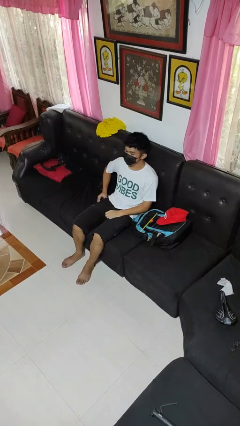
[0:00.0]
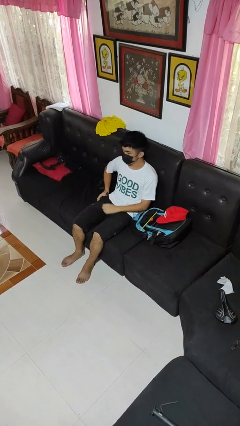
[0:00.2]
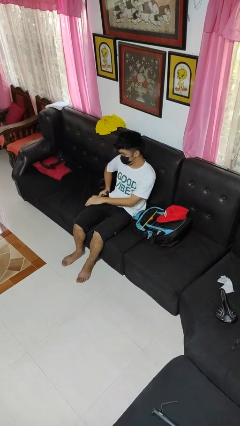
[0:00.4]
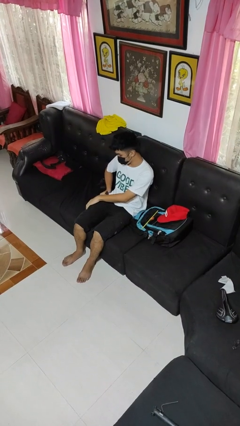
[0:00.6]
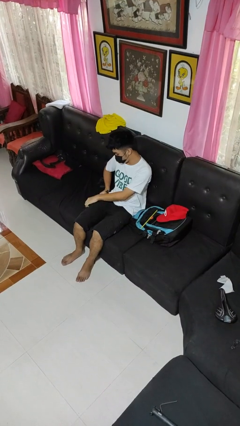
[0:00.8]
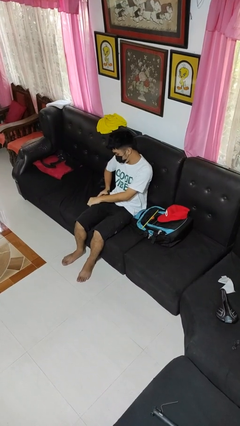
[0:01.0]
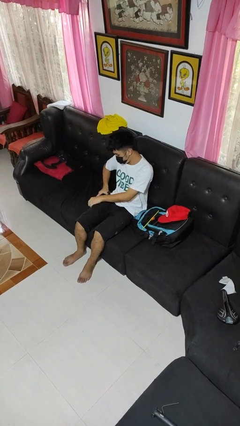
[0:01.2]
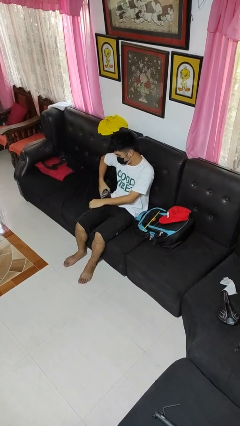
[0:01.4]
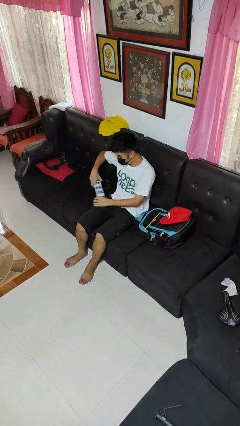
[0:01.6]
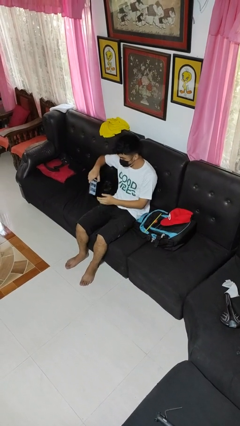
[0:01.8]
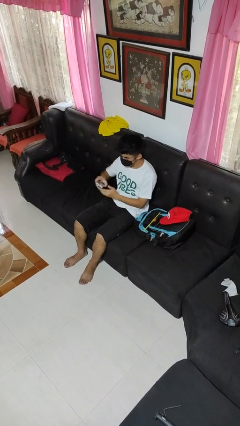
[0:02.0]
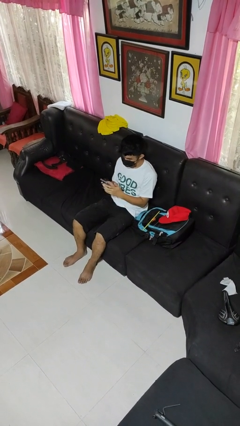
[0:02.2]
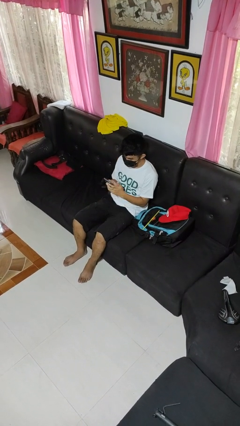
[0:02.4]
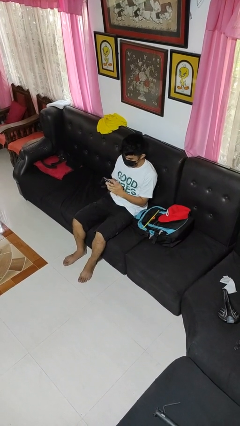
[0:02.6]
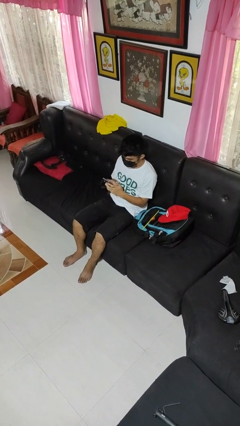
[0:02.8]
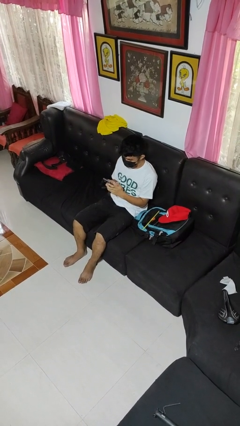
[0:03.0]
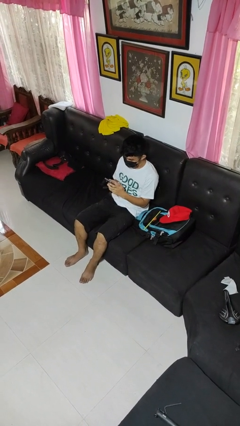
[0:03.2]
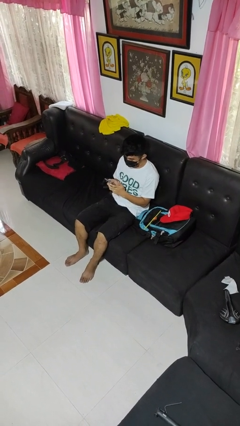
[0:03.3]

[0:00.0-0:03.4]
person takes phone from pocket

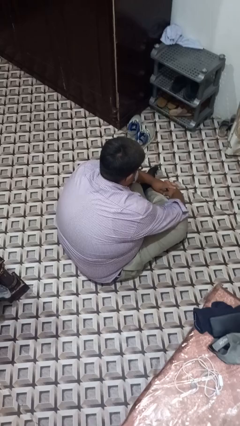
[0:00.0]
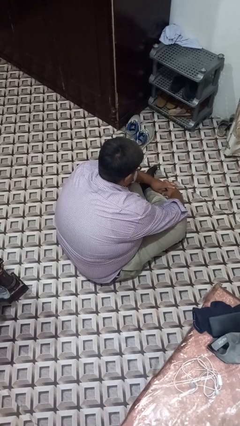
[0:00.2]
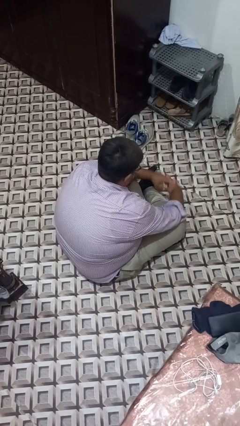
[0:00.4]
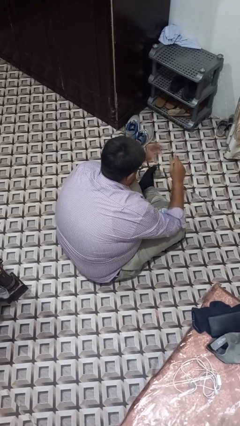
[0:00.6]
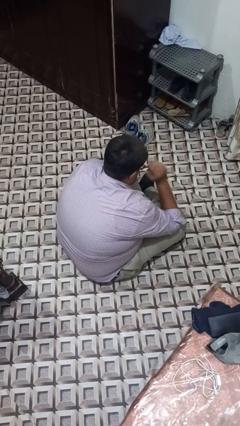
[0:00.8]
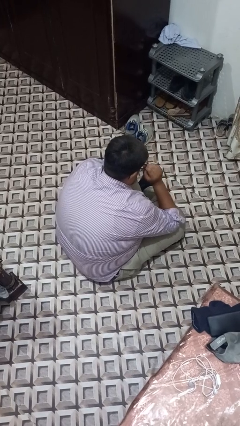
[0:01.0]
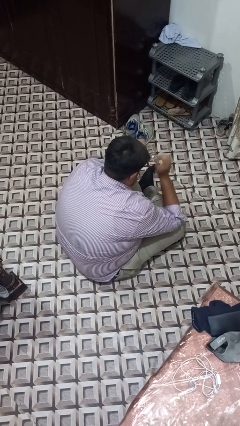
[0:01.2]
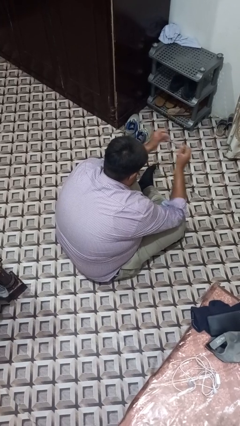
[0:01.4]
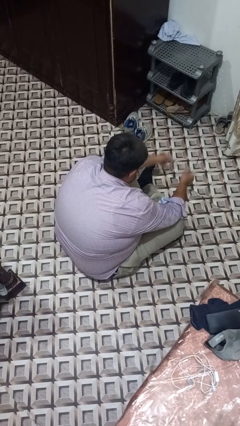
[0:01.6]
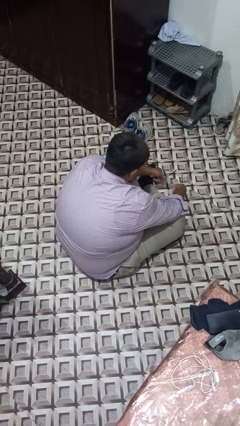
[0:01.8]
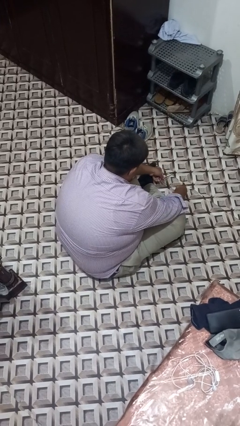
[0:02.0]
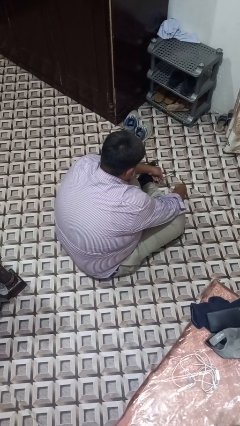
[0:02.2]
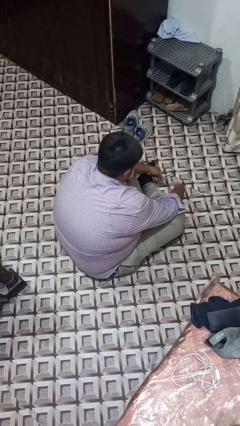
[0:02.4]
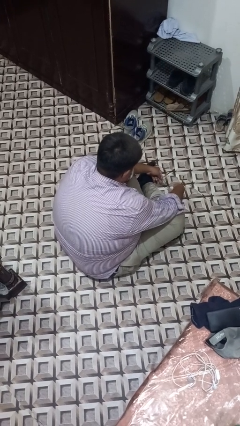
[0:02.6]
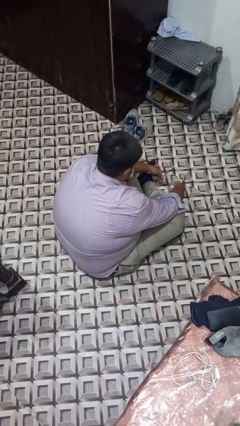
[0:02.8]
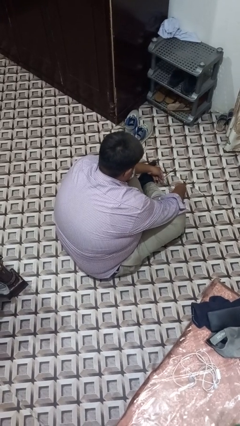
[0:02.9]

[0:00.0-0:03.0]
person takes off glasses

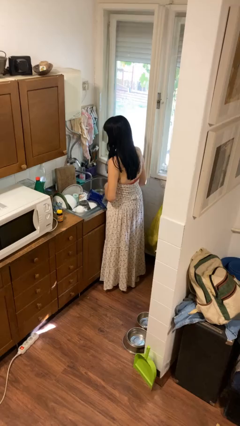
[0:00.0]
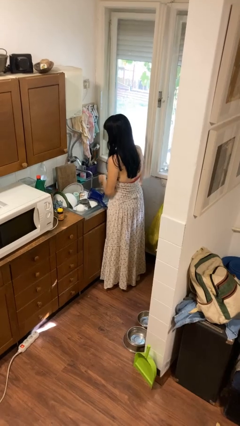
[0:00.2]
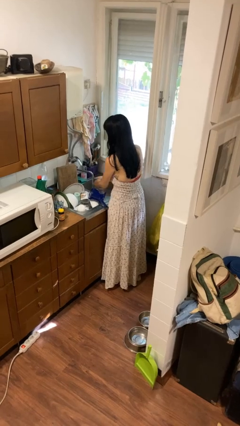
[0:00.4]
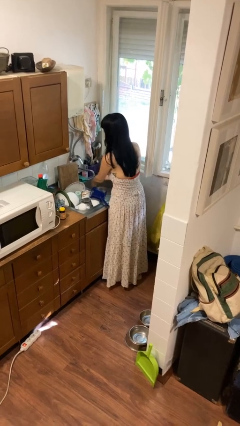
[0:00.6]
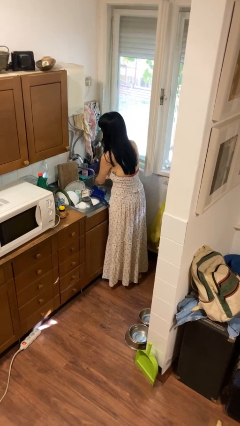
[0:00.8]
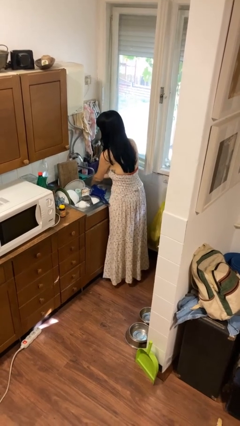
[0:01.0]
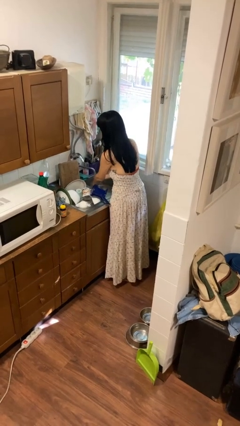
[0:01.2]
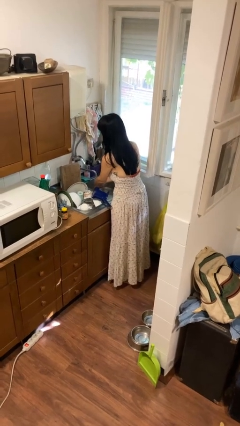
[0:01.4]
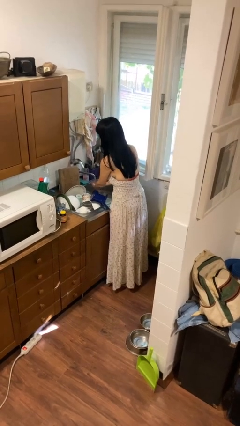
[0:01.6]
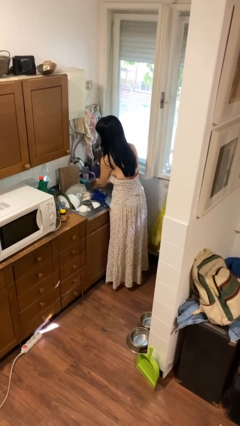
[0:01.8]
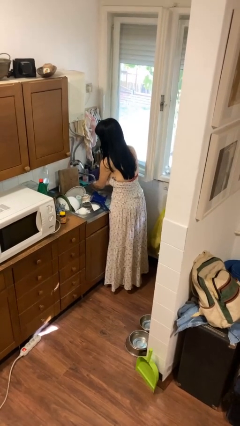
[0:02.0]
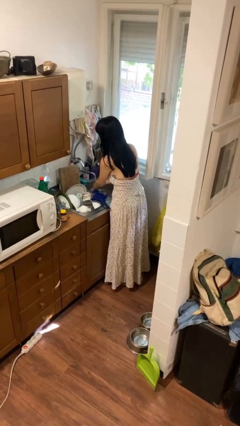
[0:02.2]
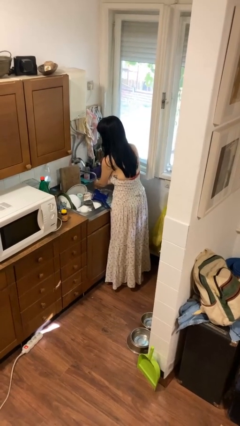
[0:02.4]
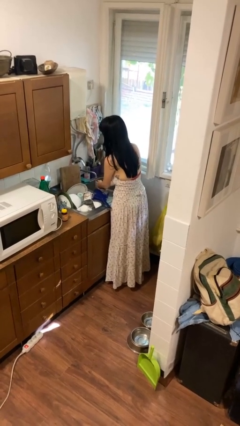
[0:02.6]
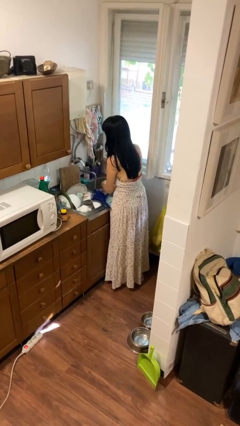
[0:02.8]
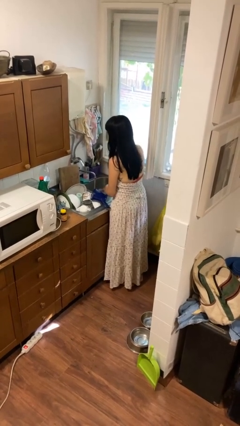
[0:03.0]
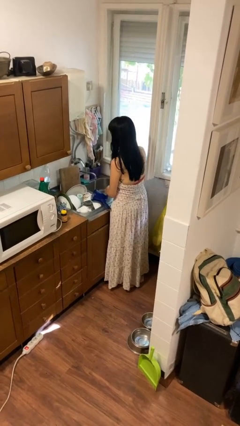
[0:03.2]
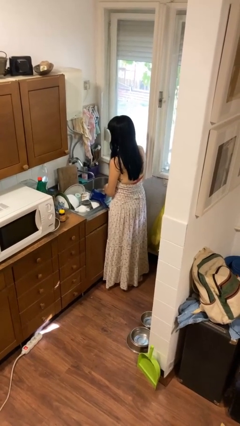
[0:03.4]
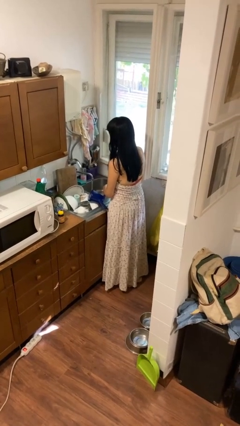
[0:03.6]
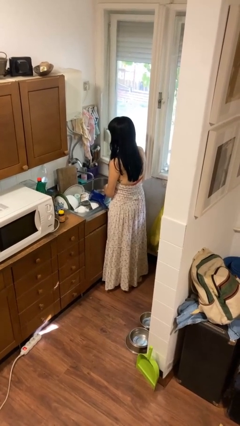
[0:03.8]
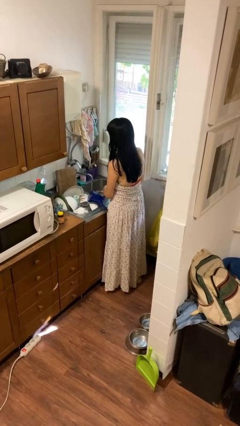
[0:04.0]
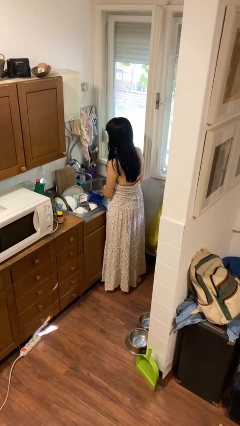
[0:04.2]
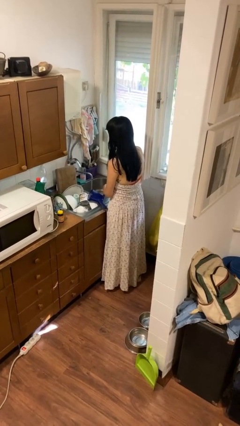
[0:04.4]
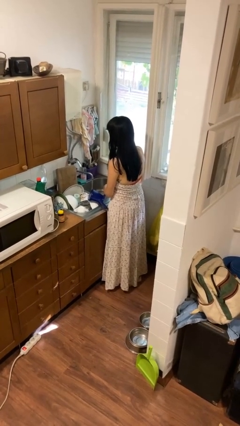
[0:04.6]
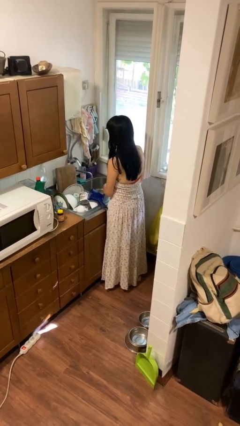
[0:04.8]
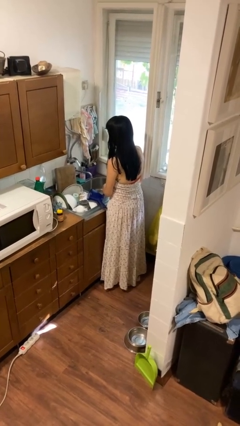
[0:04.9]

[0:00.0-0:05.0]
person washes hands

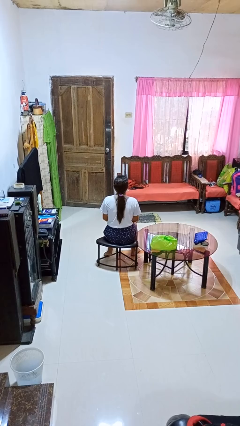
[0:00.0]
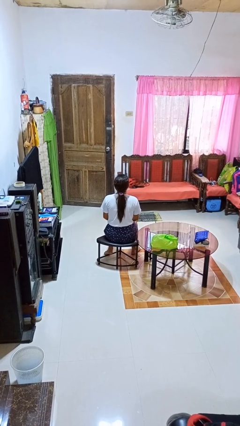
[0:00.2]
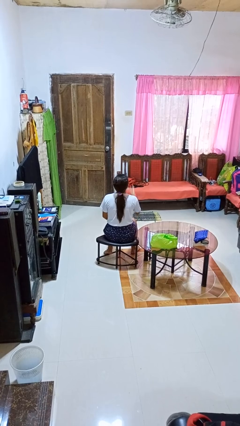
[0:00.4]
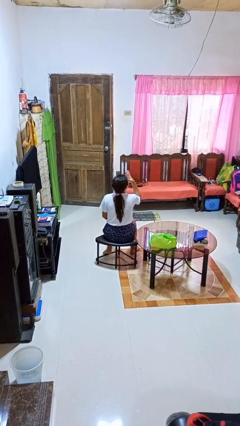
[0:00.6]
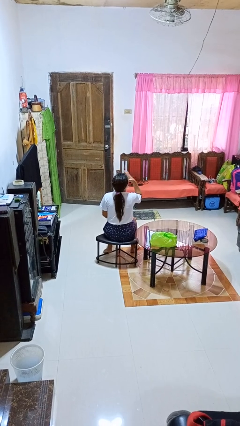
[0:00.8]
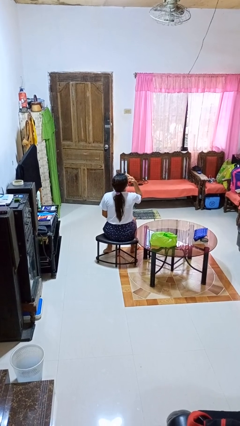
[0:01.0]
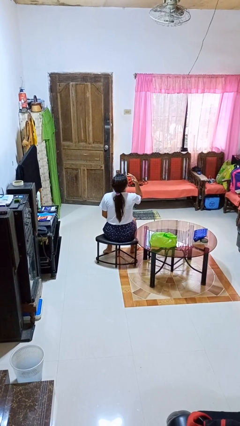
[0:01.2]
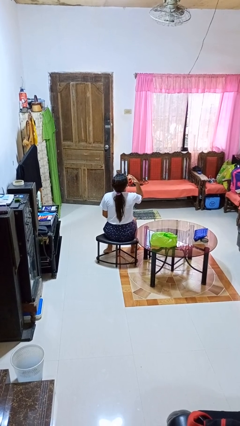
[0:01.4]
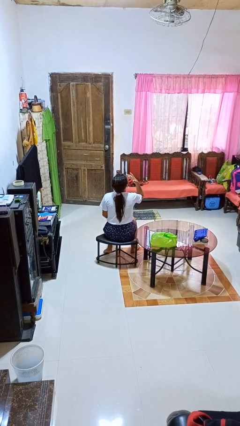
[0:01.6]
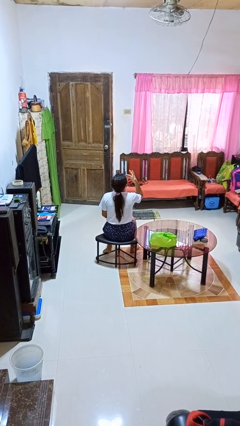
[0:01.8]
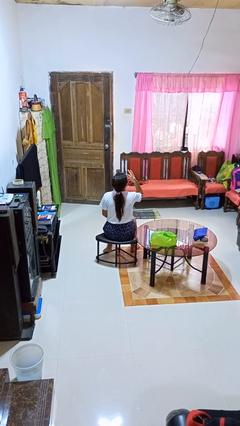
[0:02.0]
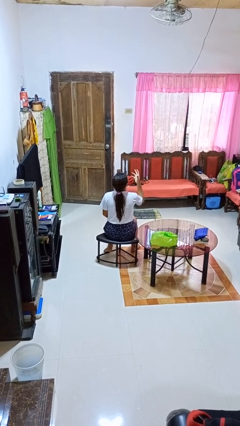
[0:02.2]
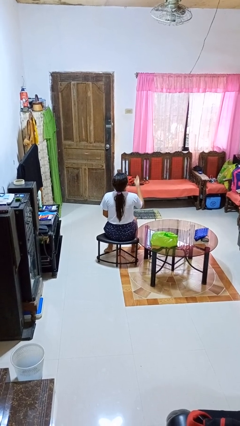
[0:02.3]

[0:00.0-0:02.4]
person licks fingers

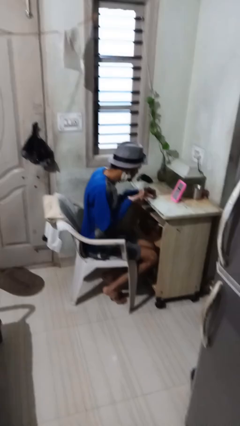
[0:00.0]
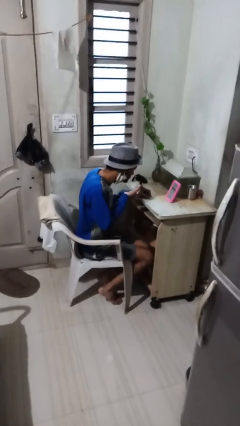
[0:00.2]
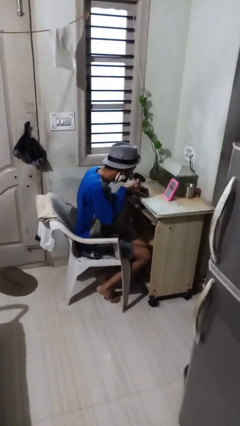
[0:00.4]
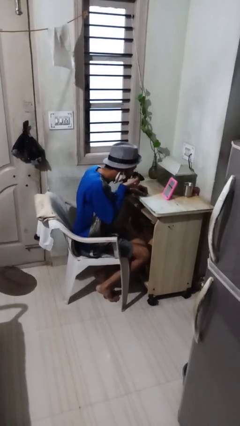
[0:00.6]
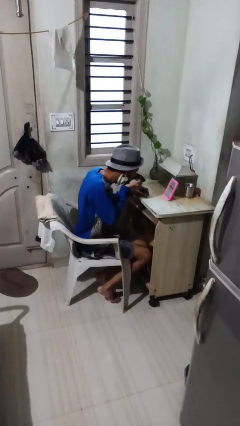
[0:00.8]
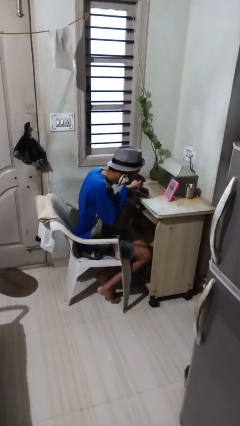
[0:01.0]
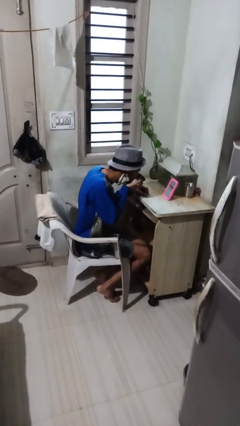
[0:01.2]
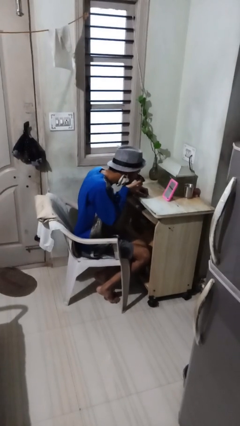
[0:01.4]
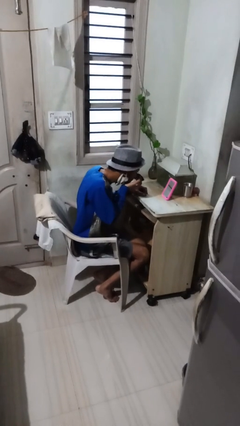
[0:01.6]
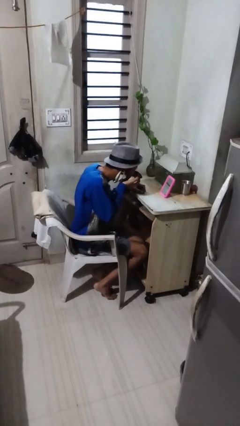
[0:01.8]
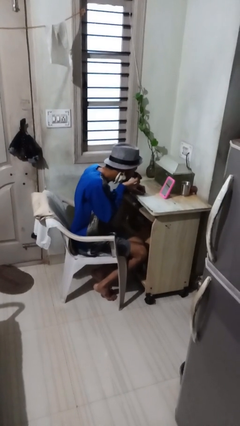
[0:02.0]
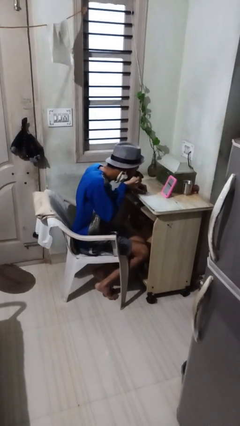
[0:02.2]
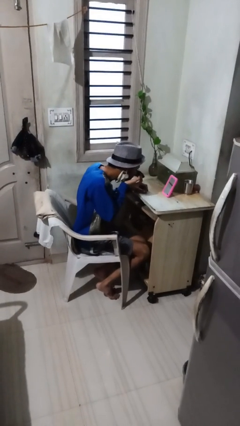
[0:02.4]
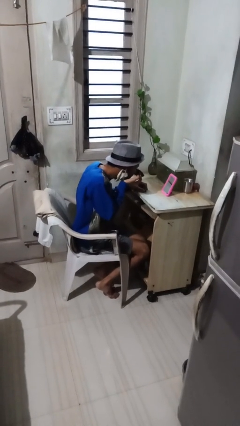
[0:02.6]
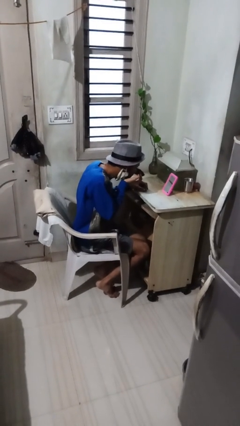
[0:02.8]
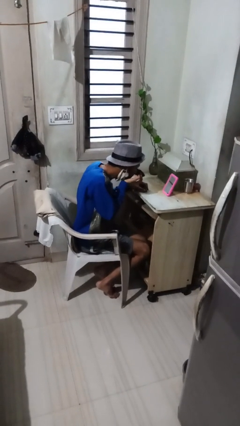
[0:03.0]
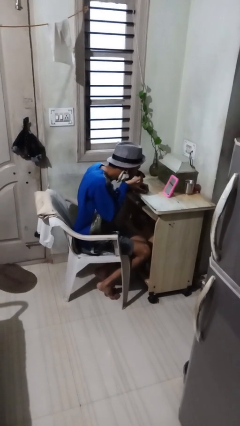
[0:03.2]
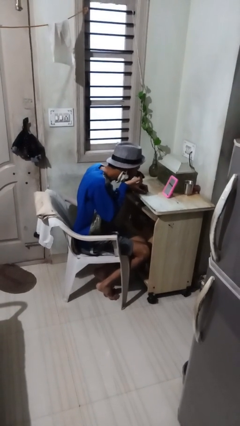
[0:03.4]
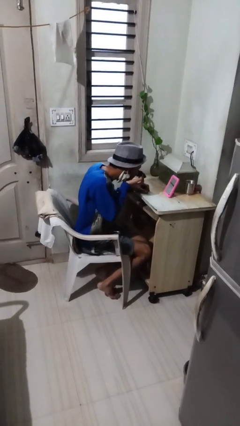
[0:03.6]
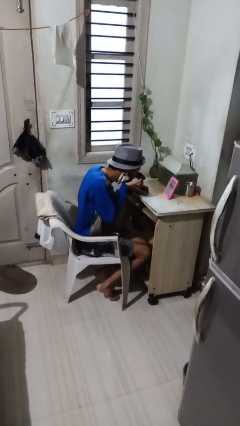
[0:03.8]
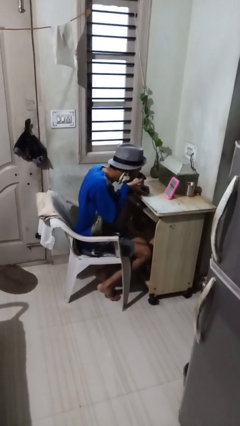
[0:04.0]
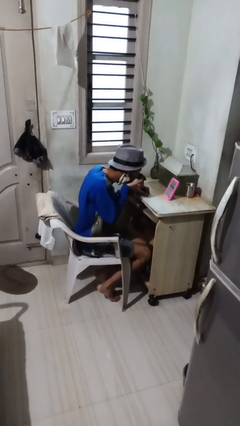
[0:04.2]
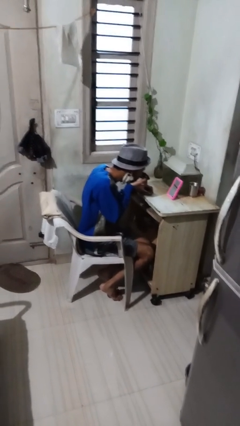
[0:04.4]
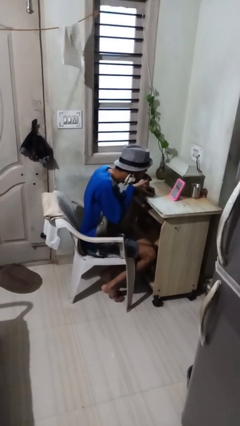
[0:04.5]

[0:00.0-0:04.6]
person applies eye makeup
